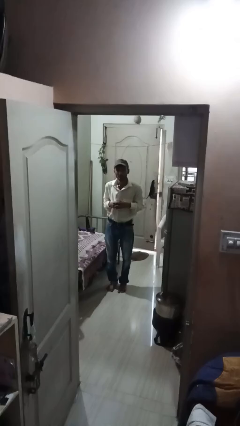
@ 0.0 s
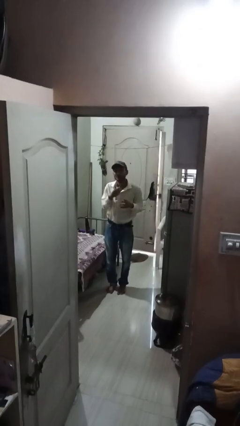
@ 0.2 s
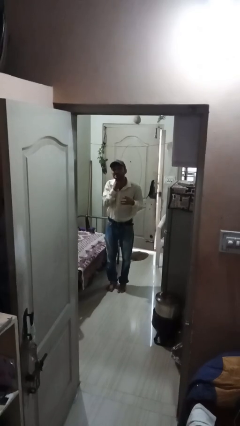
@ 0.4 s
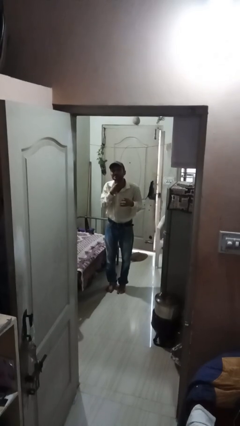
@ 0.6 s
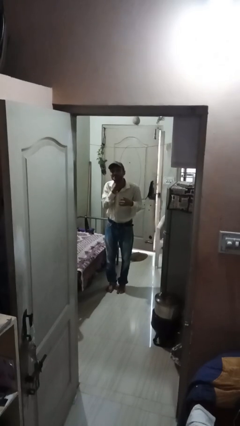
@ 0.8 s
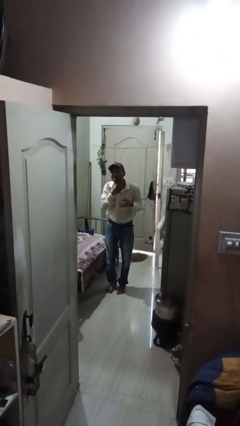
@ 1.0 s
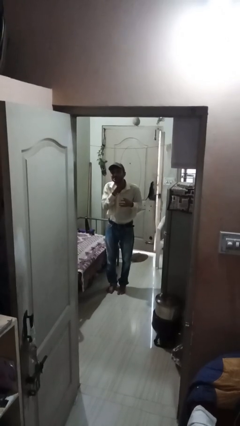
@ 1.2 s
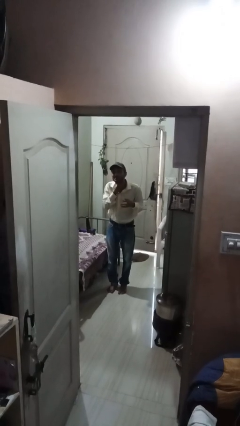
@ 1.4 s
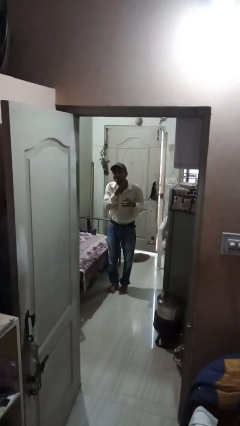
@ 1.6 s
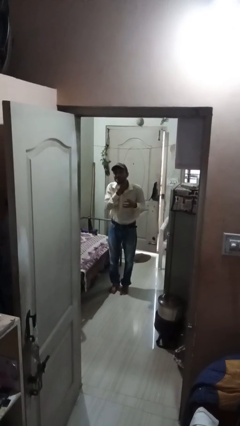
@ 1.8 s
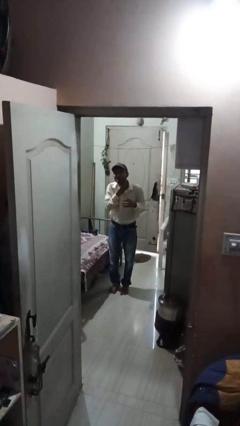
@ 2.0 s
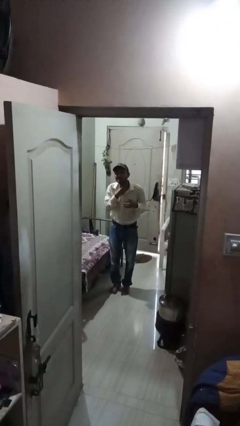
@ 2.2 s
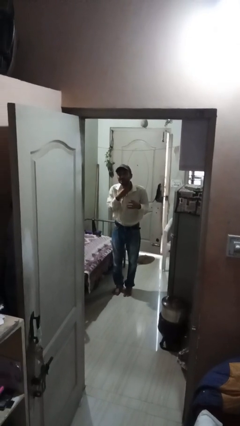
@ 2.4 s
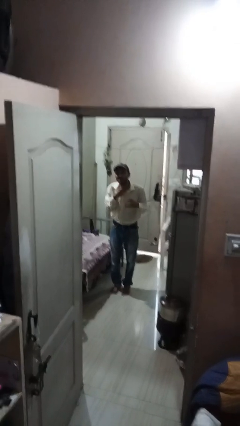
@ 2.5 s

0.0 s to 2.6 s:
person rubs neck

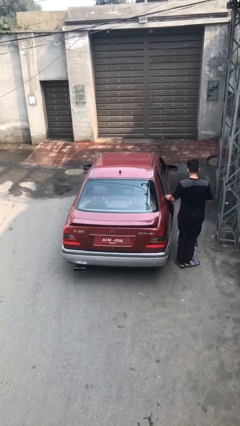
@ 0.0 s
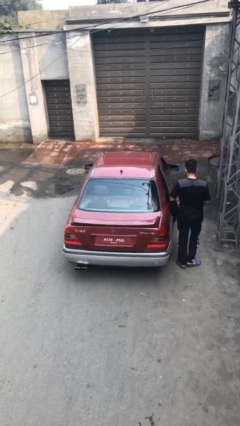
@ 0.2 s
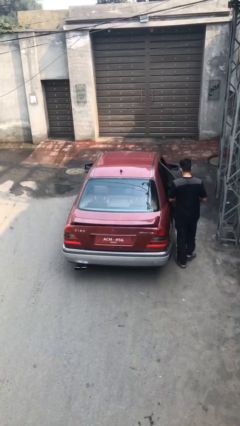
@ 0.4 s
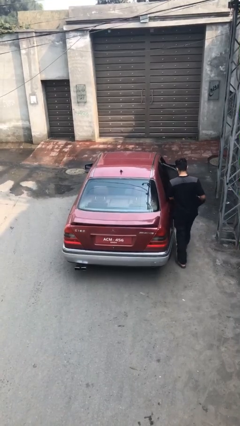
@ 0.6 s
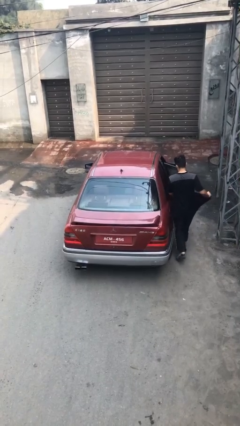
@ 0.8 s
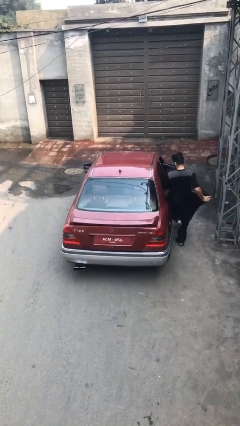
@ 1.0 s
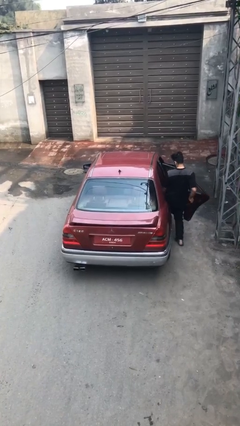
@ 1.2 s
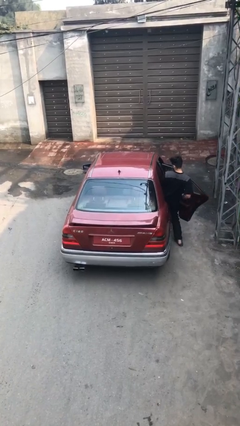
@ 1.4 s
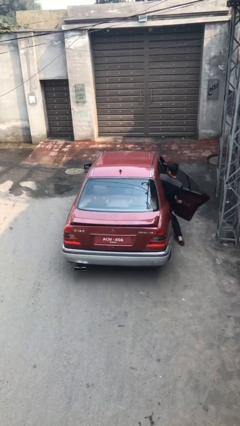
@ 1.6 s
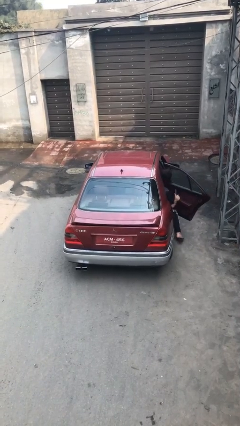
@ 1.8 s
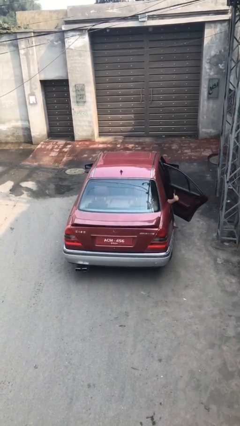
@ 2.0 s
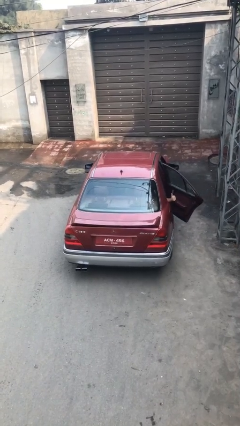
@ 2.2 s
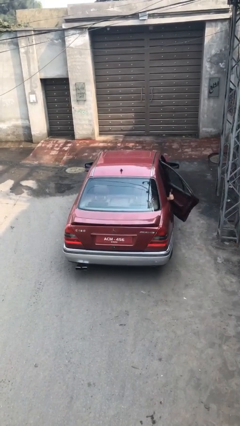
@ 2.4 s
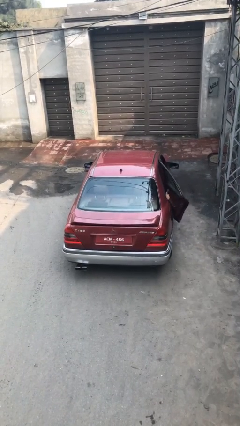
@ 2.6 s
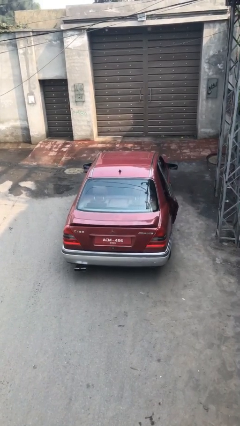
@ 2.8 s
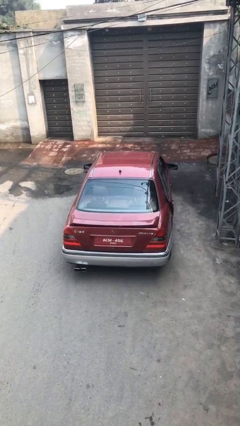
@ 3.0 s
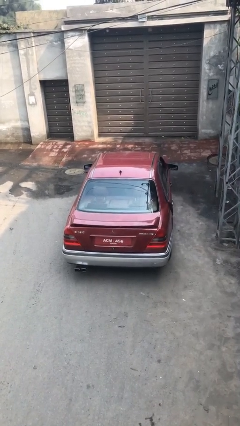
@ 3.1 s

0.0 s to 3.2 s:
car picks up person

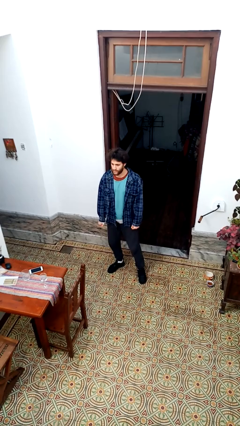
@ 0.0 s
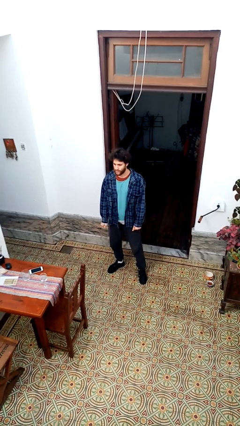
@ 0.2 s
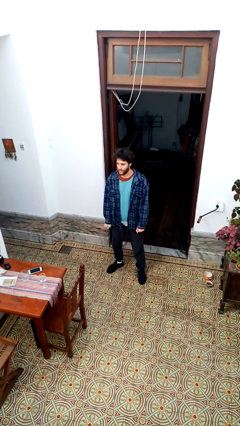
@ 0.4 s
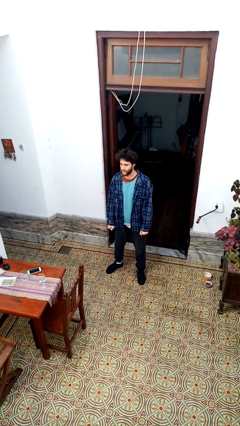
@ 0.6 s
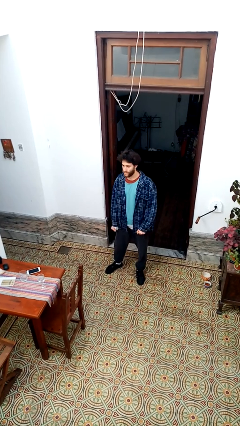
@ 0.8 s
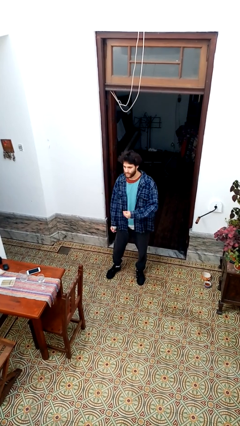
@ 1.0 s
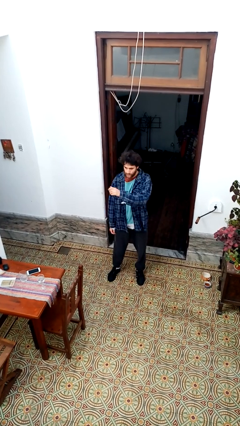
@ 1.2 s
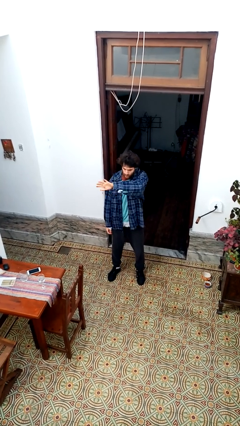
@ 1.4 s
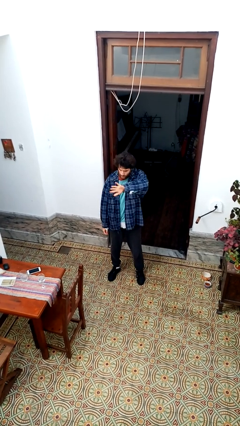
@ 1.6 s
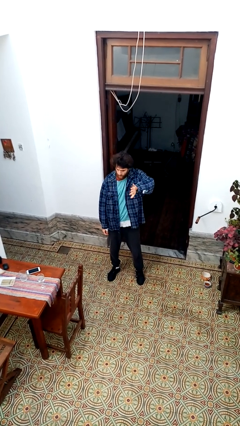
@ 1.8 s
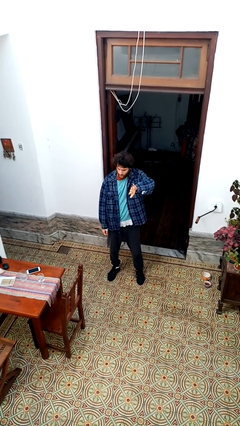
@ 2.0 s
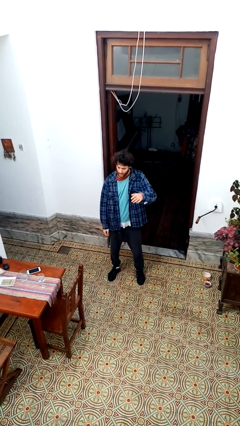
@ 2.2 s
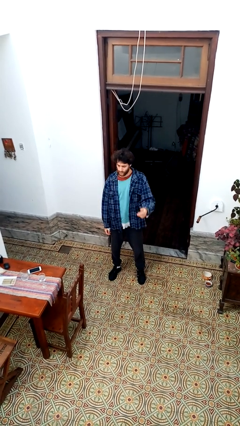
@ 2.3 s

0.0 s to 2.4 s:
person gestures swipe left

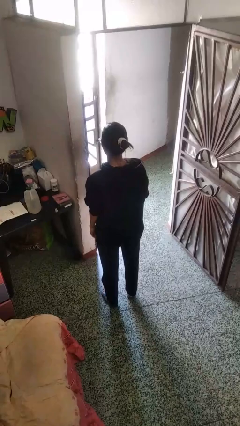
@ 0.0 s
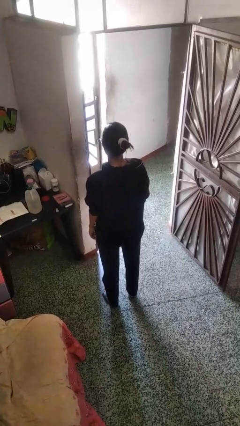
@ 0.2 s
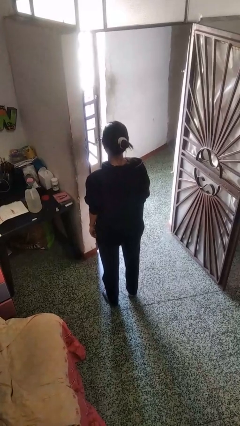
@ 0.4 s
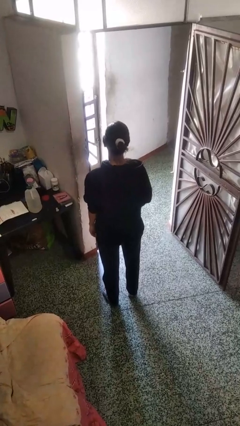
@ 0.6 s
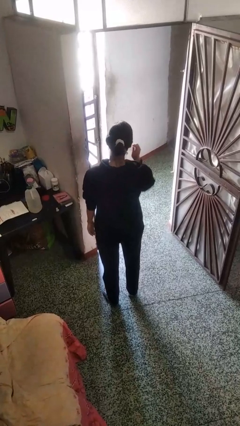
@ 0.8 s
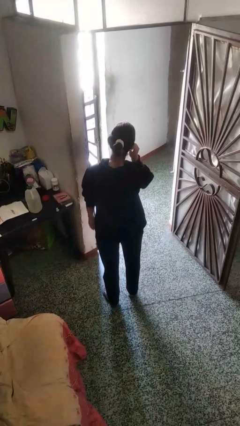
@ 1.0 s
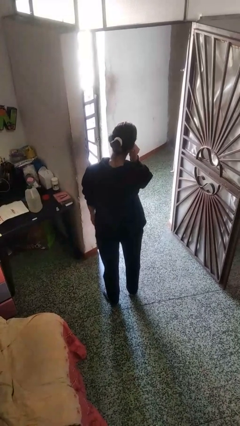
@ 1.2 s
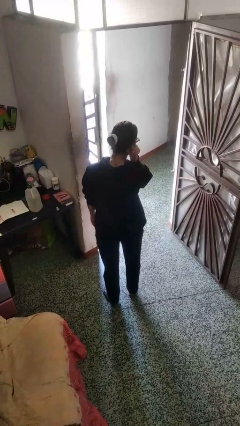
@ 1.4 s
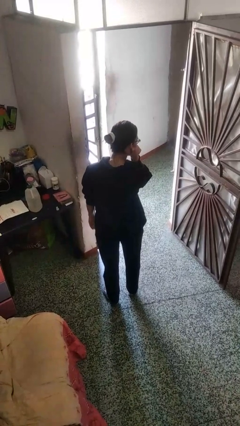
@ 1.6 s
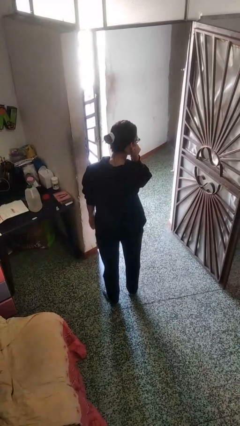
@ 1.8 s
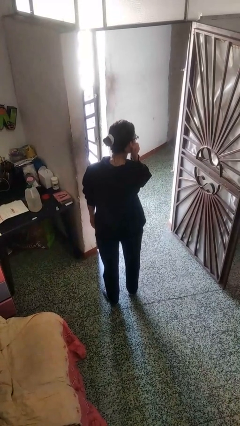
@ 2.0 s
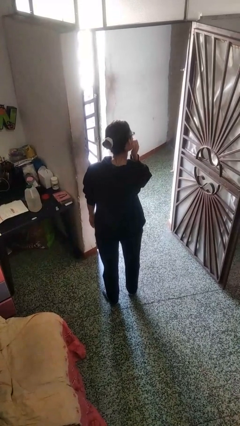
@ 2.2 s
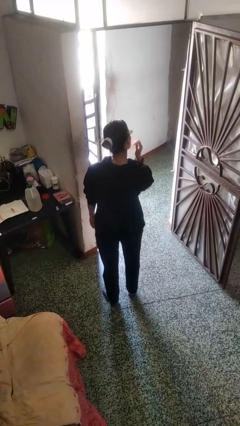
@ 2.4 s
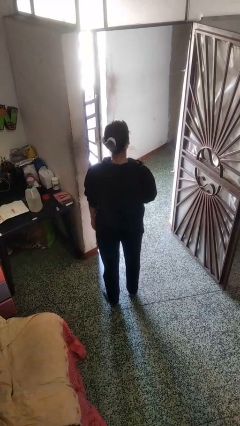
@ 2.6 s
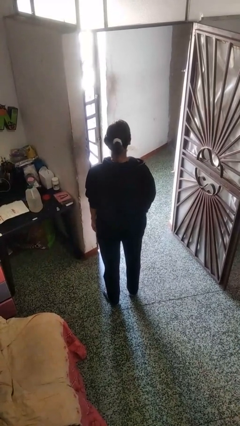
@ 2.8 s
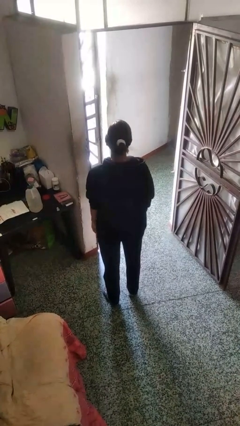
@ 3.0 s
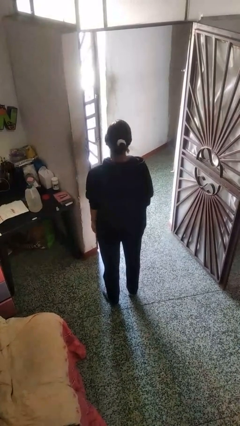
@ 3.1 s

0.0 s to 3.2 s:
person touches earlobe

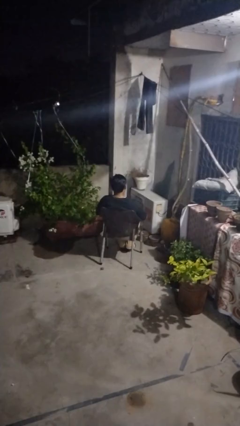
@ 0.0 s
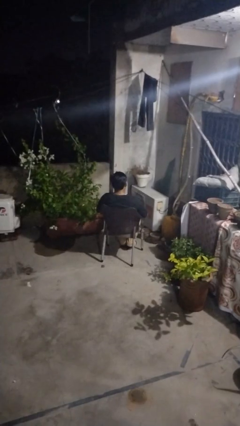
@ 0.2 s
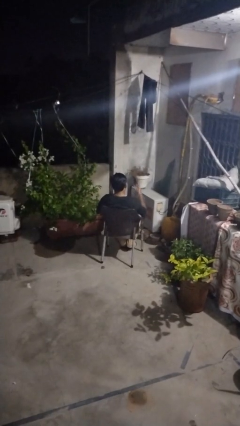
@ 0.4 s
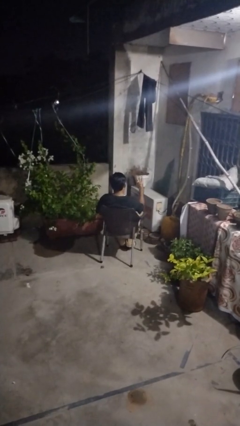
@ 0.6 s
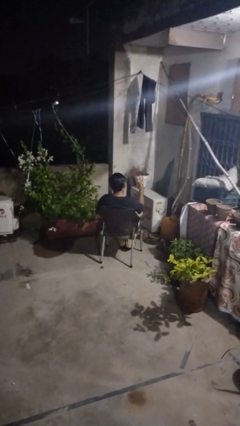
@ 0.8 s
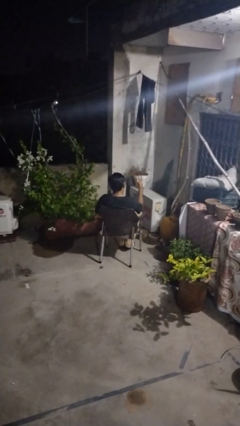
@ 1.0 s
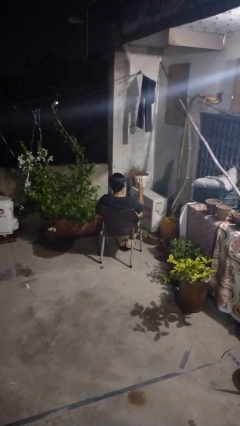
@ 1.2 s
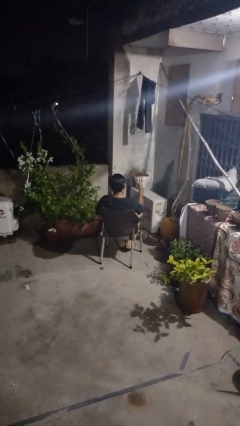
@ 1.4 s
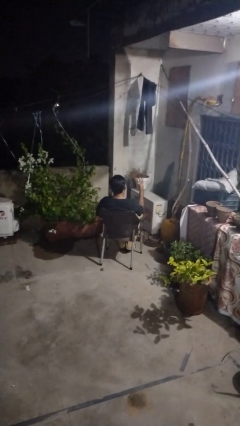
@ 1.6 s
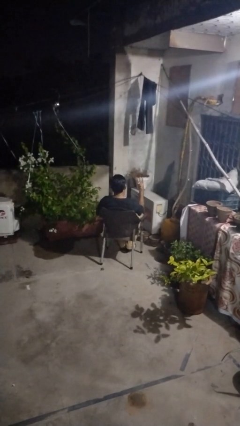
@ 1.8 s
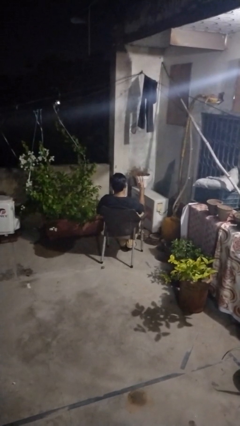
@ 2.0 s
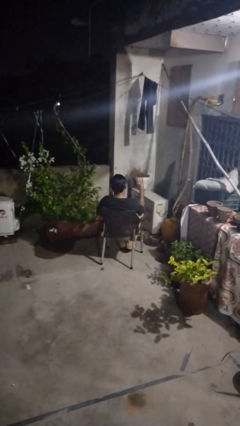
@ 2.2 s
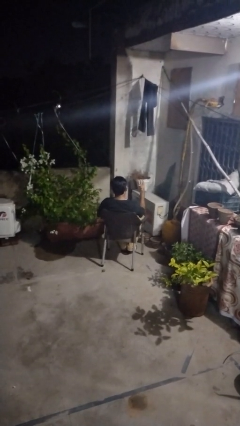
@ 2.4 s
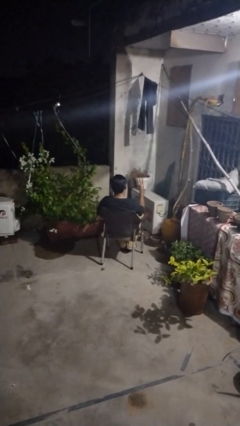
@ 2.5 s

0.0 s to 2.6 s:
person gestures number three

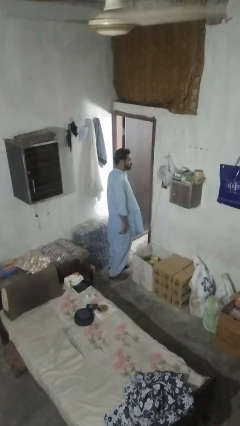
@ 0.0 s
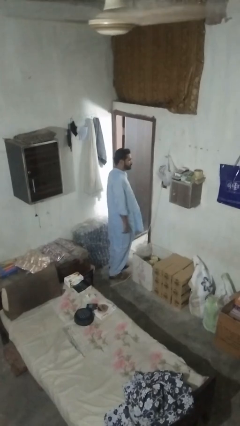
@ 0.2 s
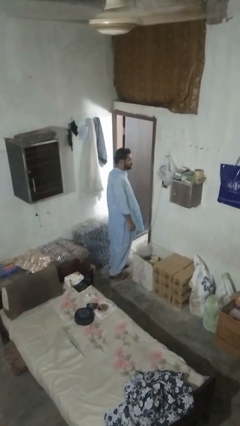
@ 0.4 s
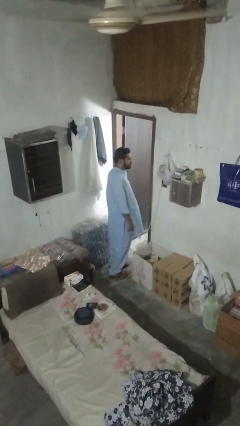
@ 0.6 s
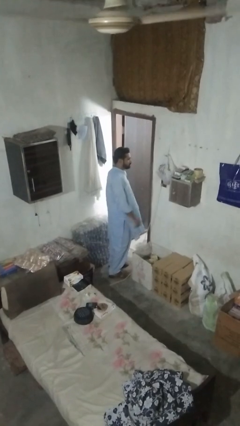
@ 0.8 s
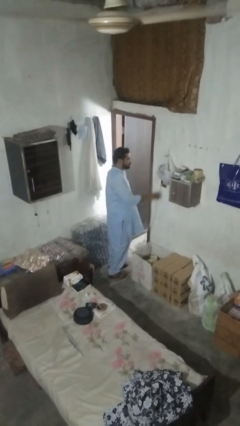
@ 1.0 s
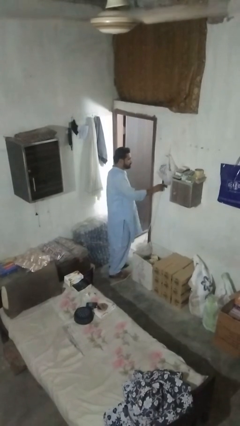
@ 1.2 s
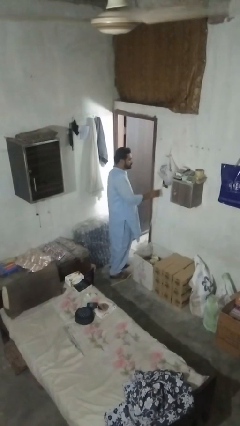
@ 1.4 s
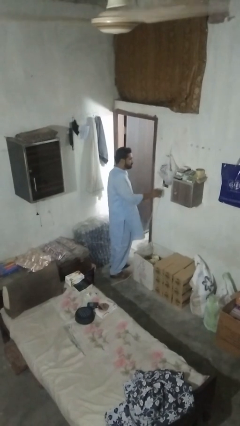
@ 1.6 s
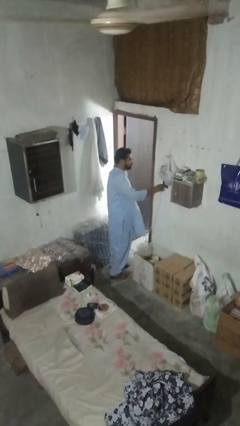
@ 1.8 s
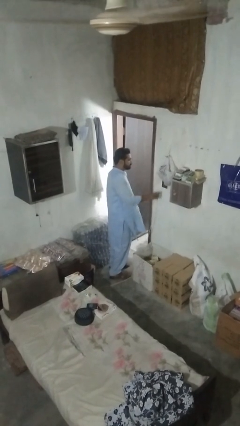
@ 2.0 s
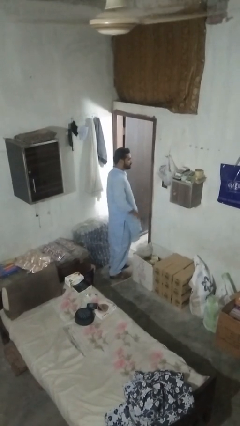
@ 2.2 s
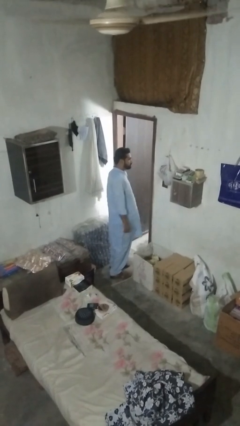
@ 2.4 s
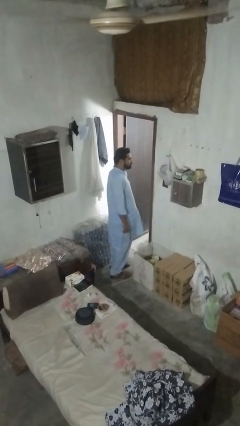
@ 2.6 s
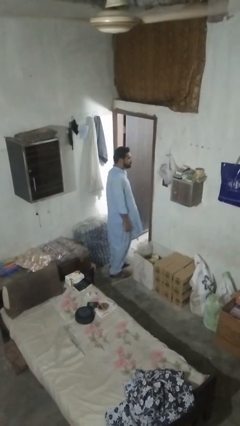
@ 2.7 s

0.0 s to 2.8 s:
person unplugs from electrical socket

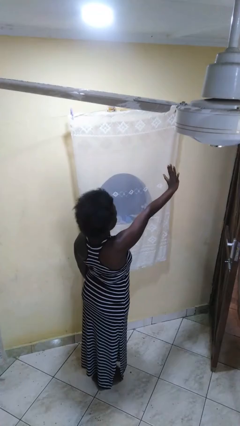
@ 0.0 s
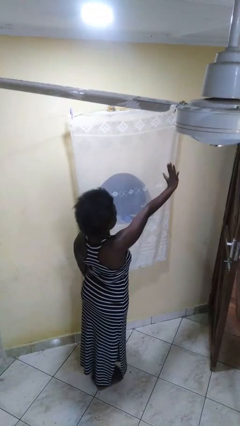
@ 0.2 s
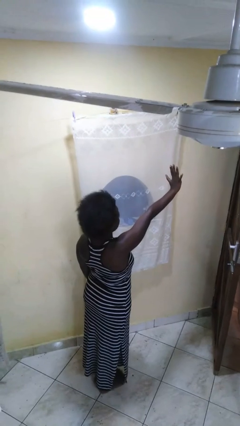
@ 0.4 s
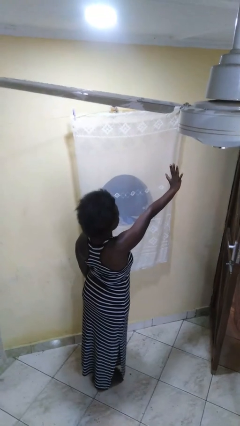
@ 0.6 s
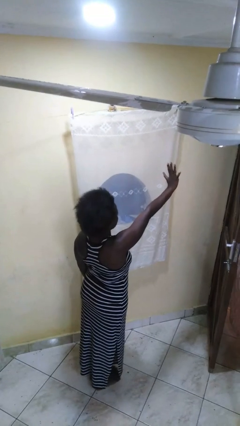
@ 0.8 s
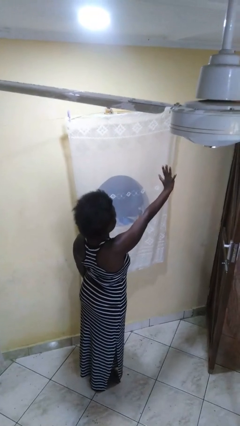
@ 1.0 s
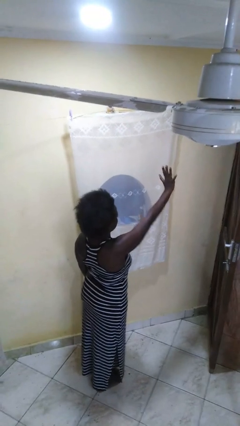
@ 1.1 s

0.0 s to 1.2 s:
person gestures stop
